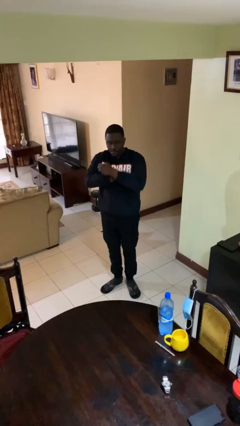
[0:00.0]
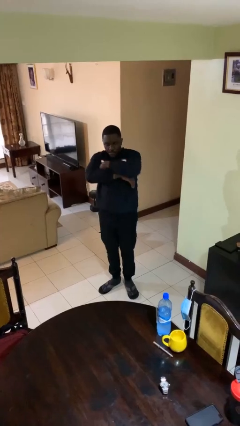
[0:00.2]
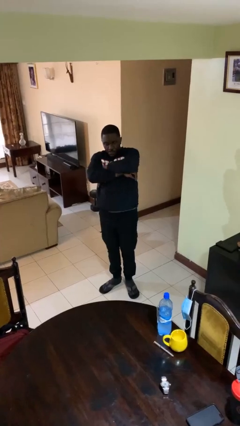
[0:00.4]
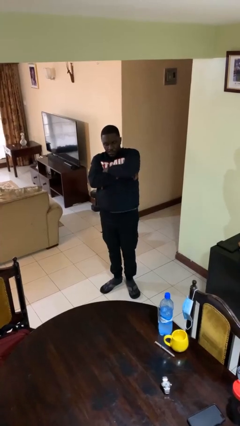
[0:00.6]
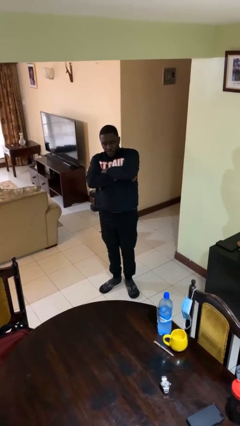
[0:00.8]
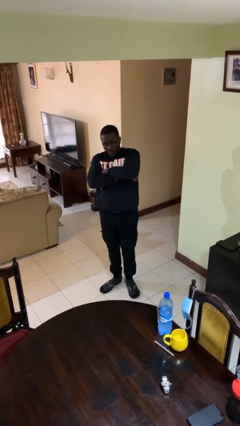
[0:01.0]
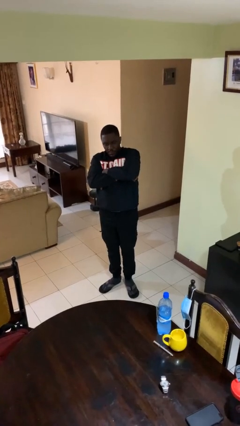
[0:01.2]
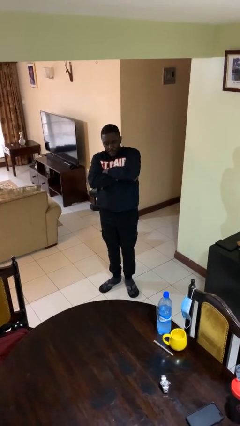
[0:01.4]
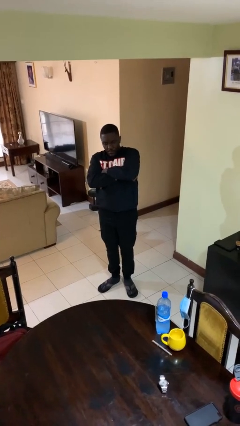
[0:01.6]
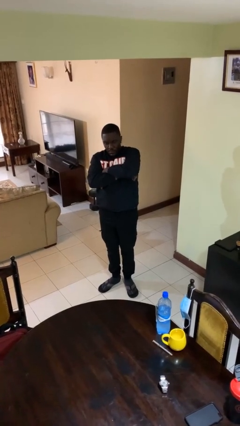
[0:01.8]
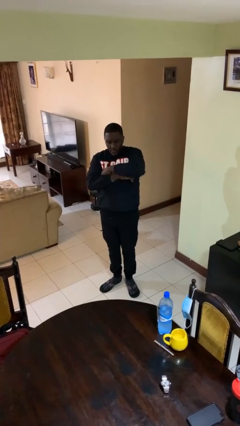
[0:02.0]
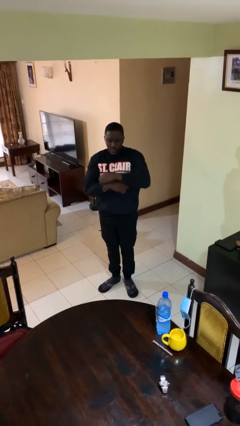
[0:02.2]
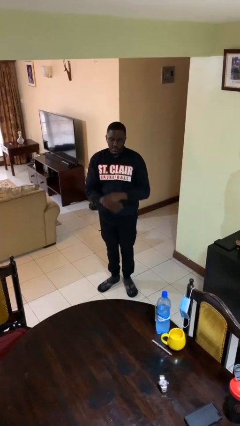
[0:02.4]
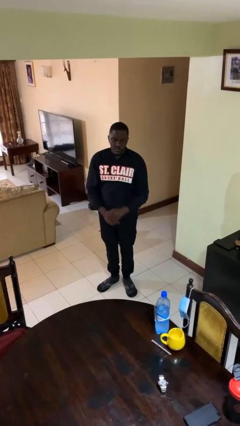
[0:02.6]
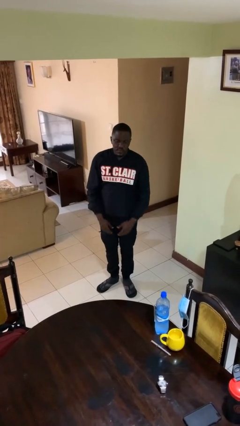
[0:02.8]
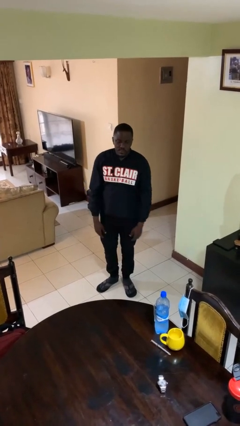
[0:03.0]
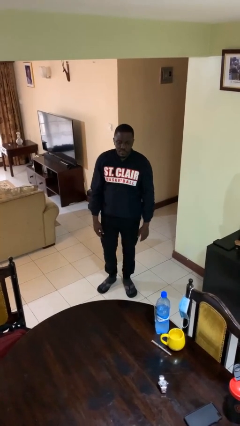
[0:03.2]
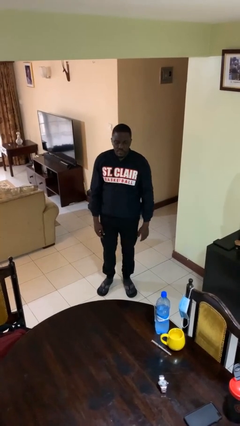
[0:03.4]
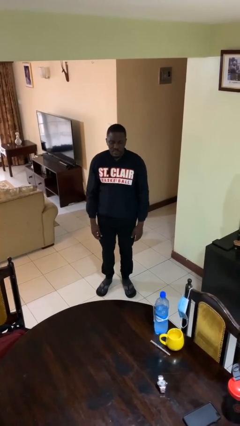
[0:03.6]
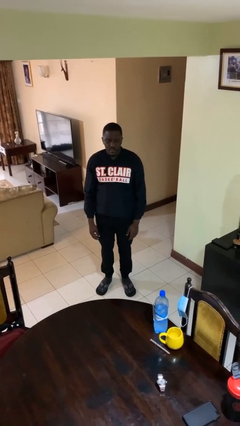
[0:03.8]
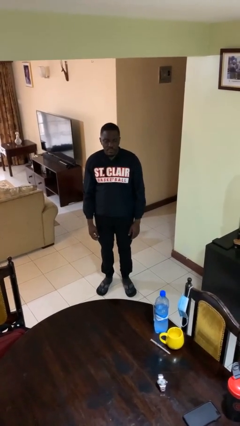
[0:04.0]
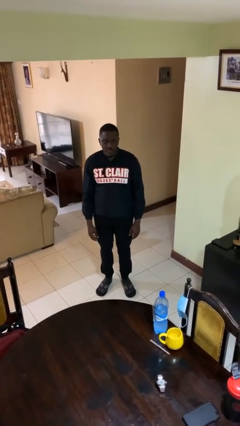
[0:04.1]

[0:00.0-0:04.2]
person crosses arms

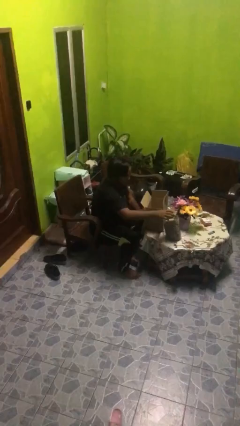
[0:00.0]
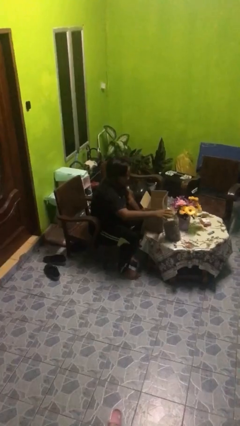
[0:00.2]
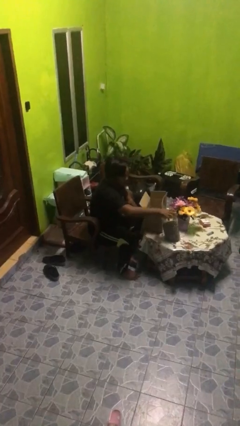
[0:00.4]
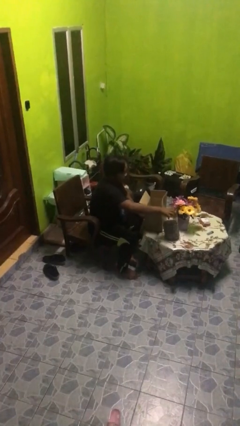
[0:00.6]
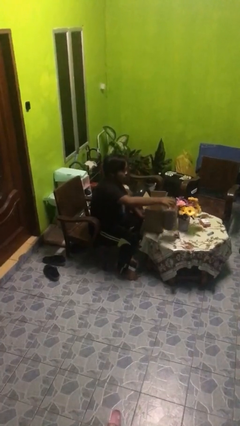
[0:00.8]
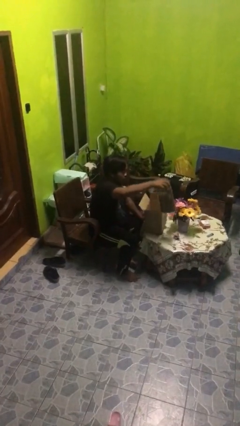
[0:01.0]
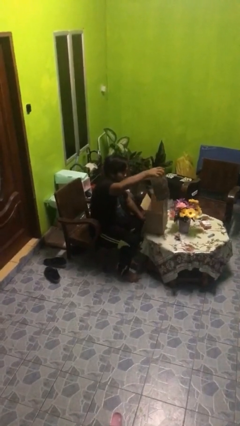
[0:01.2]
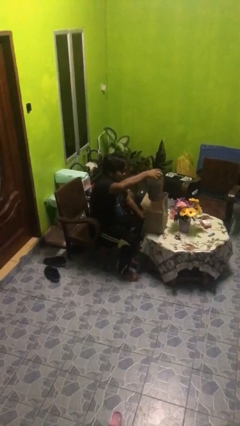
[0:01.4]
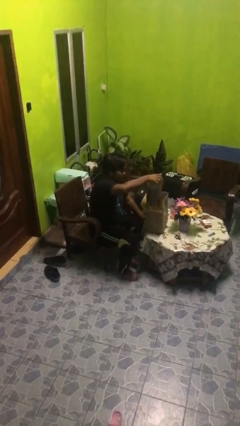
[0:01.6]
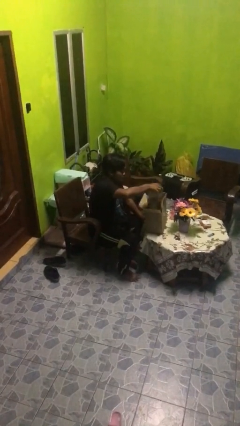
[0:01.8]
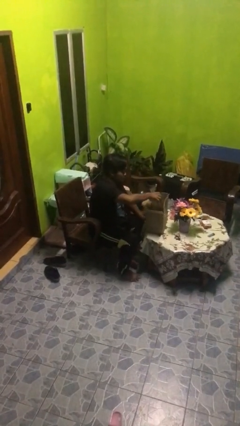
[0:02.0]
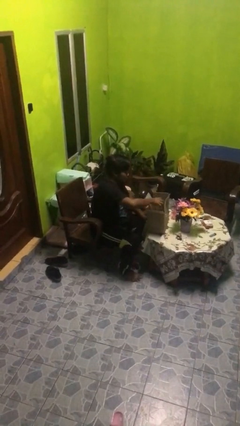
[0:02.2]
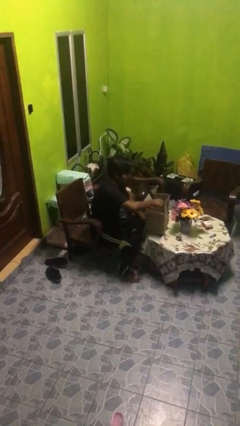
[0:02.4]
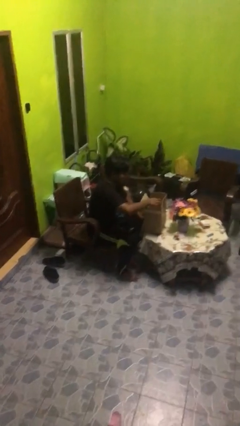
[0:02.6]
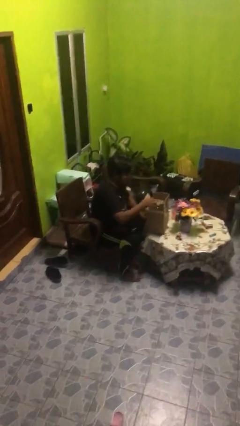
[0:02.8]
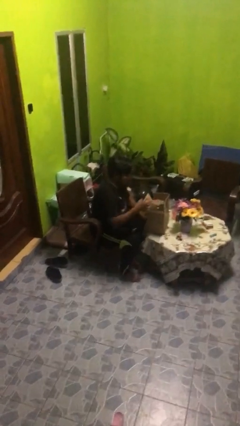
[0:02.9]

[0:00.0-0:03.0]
person puts object into box

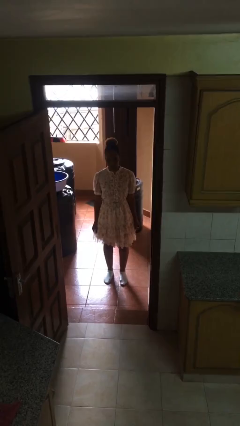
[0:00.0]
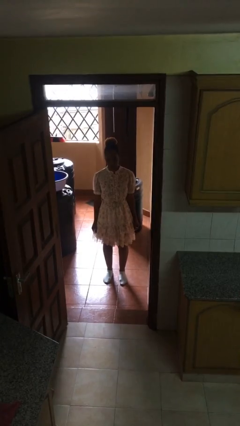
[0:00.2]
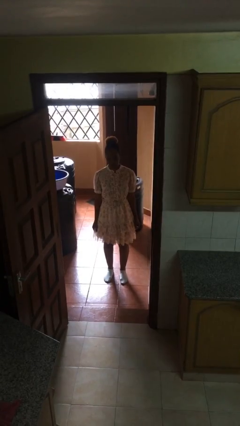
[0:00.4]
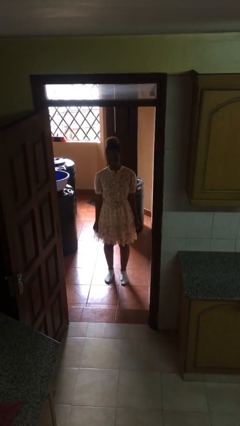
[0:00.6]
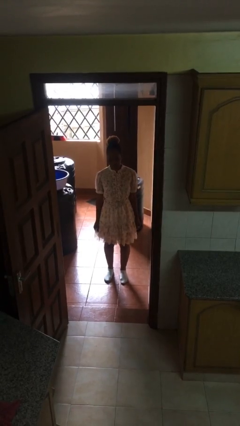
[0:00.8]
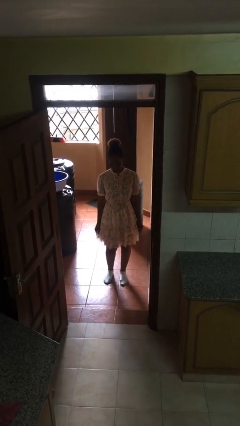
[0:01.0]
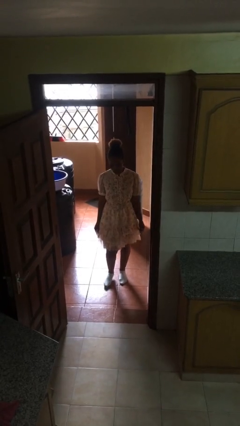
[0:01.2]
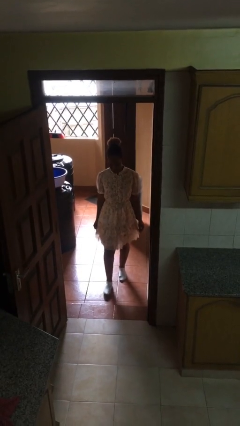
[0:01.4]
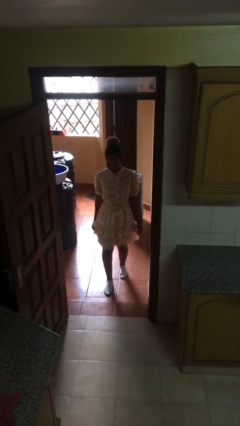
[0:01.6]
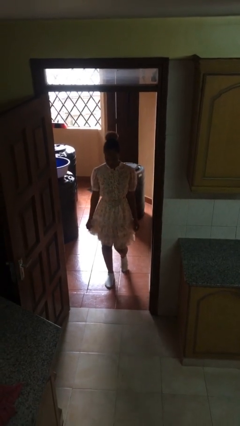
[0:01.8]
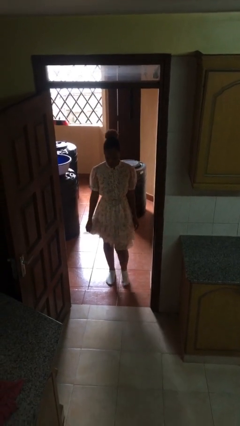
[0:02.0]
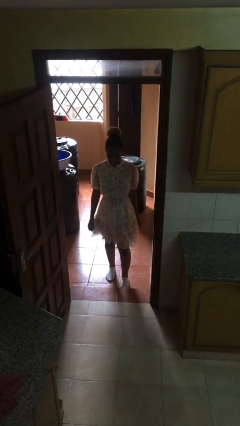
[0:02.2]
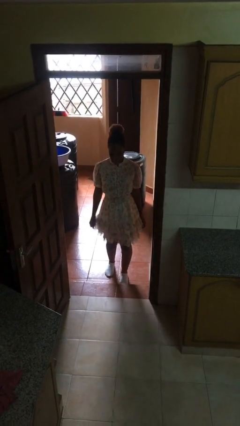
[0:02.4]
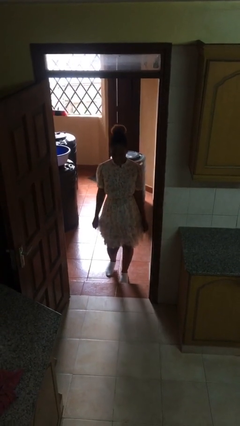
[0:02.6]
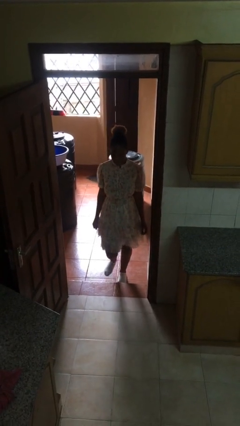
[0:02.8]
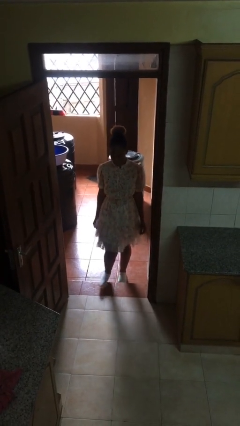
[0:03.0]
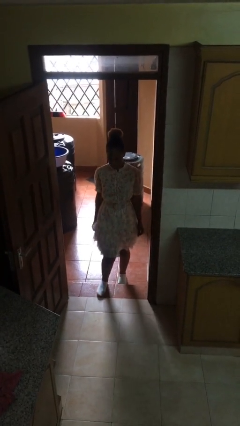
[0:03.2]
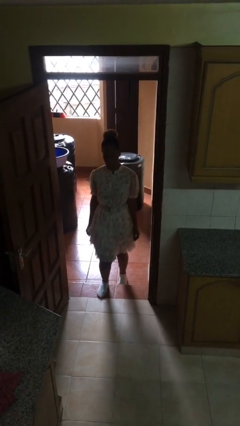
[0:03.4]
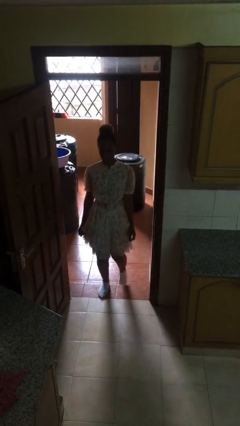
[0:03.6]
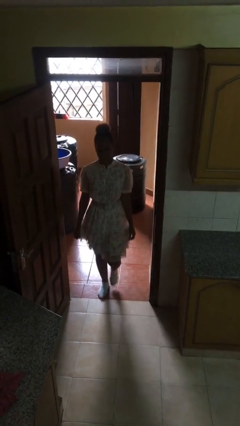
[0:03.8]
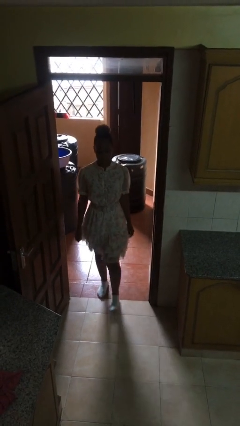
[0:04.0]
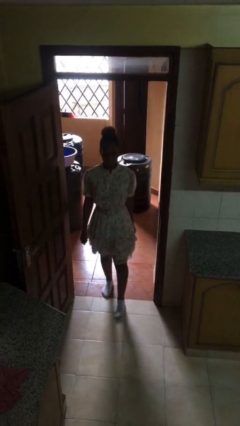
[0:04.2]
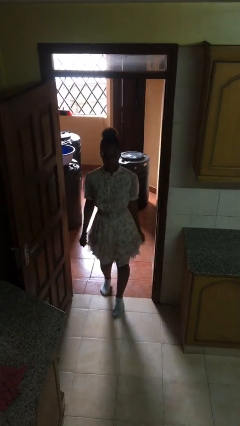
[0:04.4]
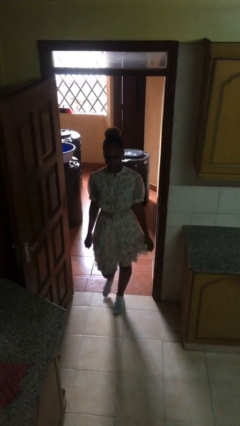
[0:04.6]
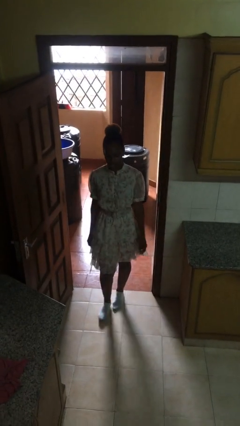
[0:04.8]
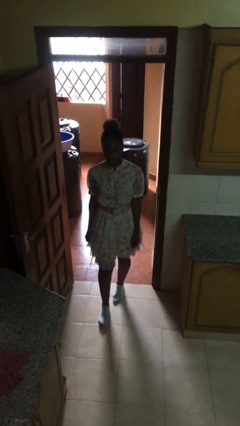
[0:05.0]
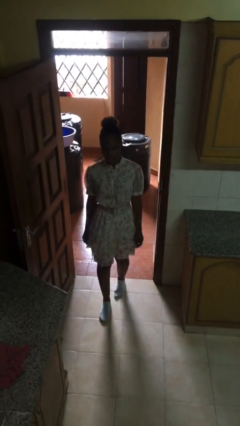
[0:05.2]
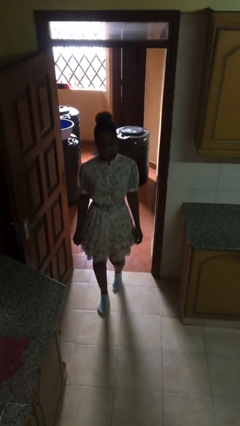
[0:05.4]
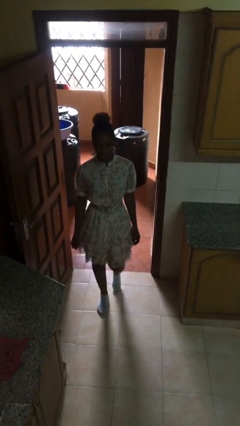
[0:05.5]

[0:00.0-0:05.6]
person enters scene through structure

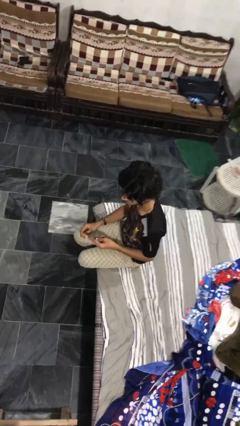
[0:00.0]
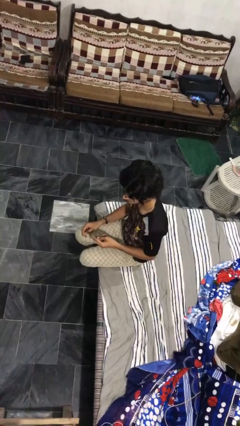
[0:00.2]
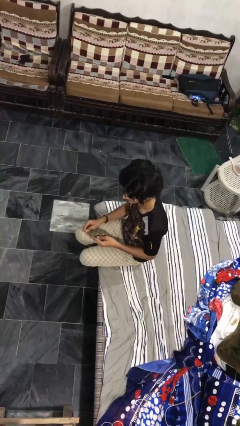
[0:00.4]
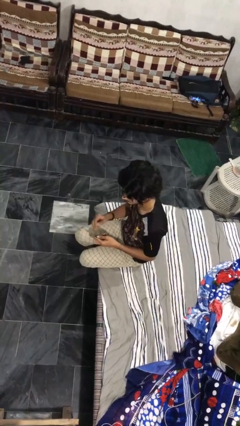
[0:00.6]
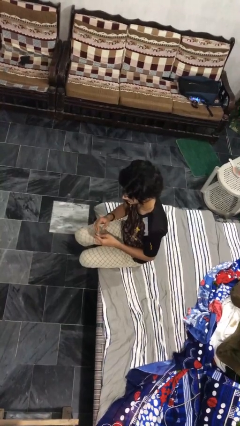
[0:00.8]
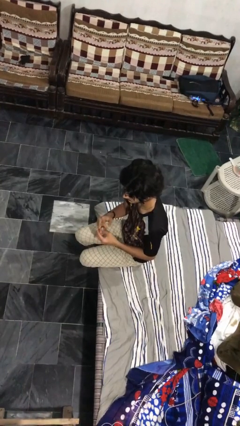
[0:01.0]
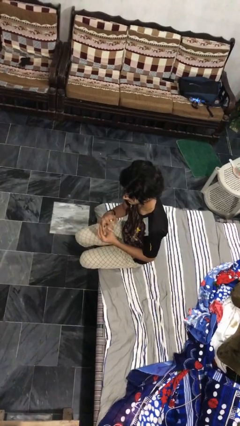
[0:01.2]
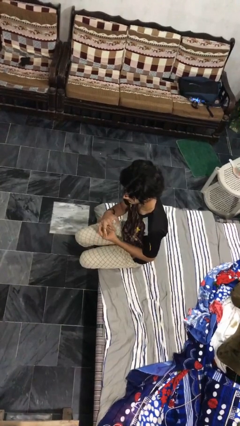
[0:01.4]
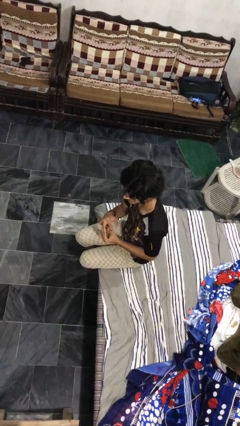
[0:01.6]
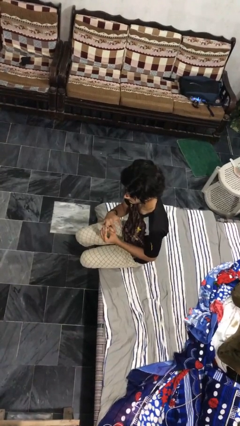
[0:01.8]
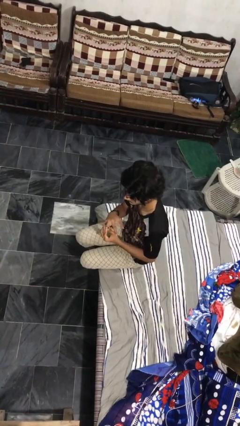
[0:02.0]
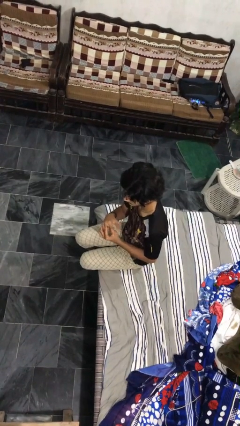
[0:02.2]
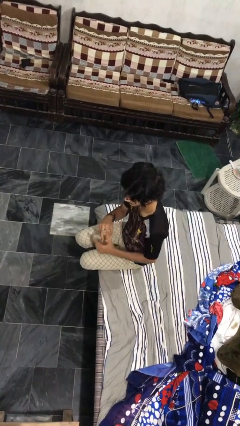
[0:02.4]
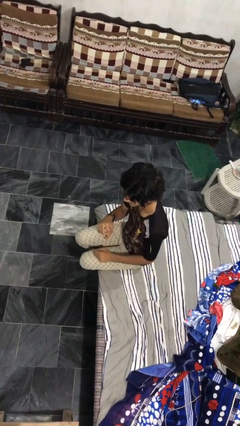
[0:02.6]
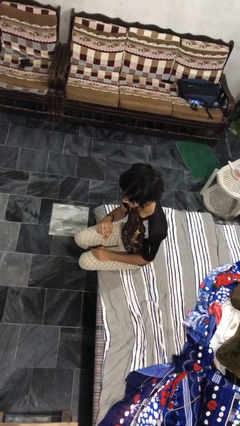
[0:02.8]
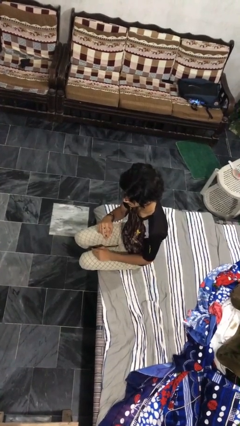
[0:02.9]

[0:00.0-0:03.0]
person puts on ring

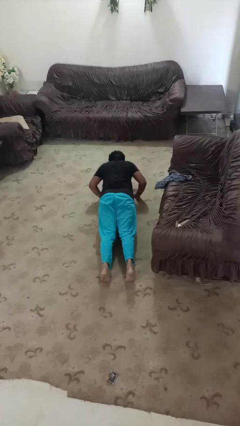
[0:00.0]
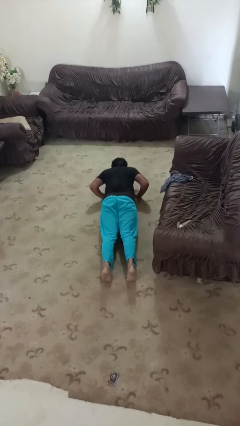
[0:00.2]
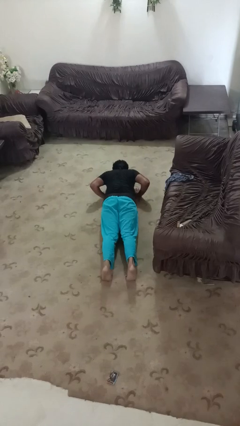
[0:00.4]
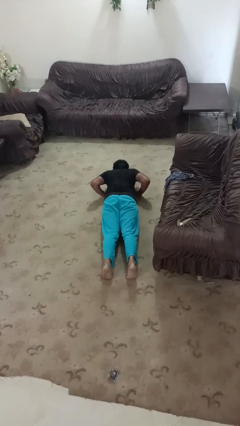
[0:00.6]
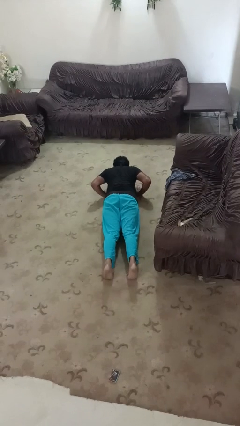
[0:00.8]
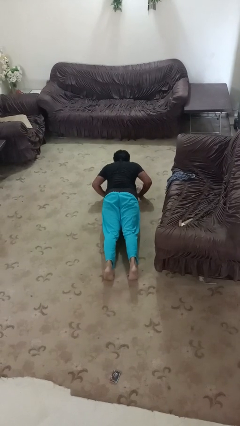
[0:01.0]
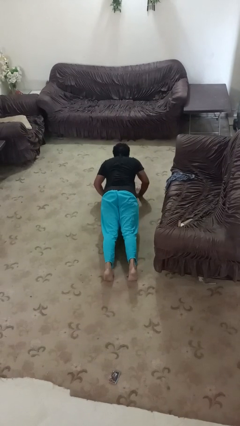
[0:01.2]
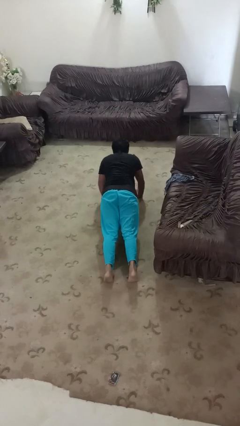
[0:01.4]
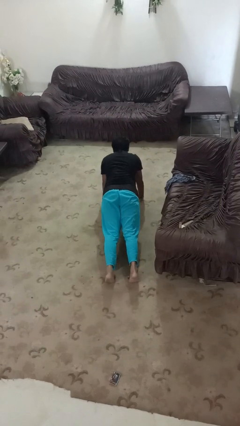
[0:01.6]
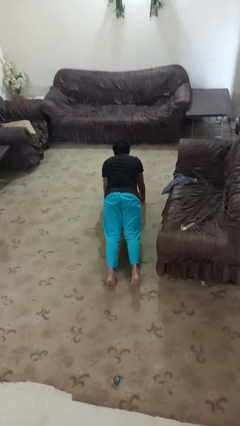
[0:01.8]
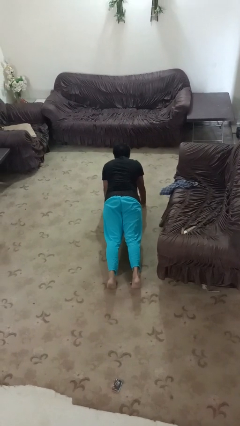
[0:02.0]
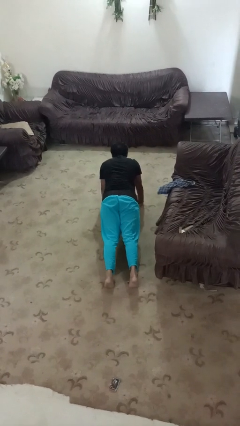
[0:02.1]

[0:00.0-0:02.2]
person exercises with pushup
